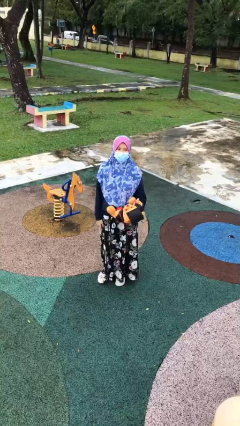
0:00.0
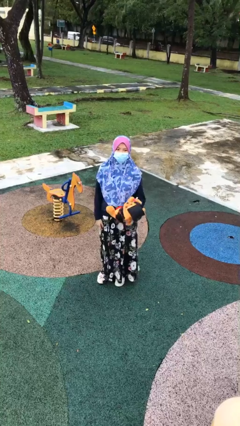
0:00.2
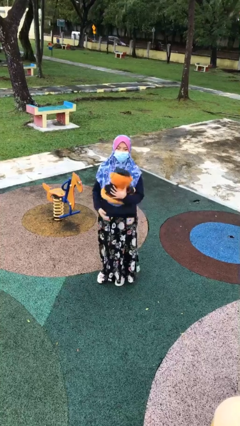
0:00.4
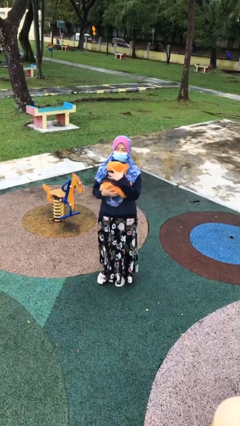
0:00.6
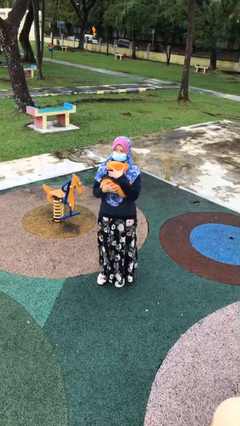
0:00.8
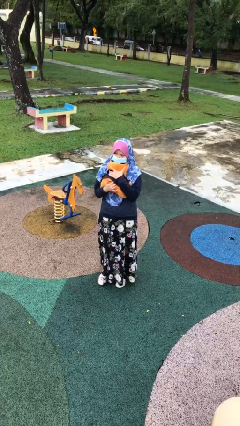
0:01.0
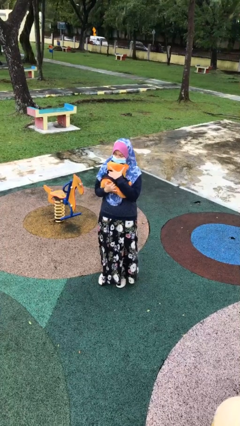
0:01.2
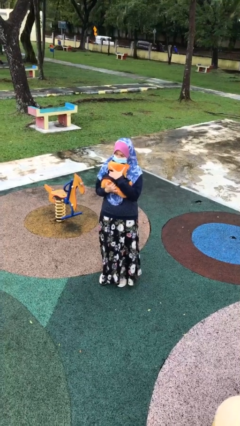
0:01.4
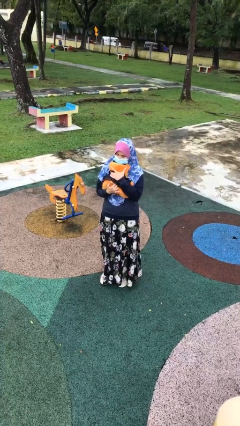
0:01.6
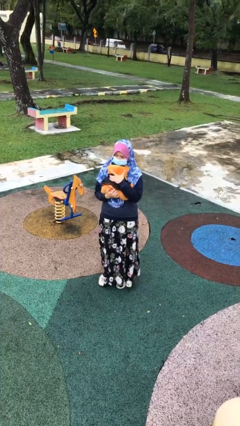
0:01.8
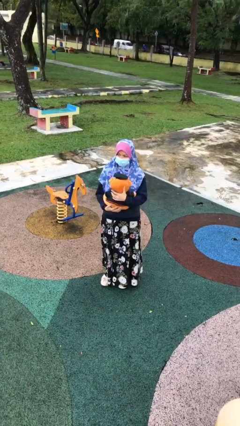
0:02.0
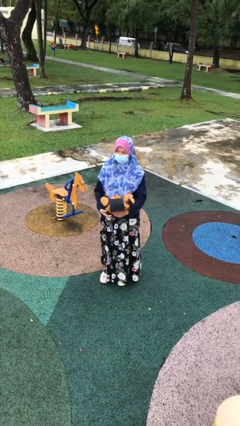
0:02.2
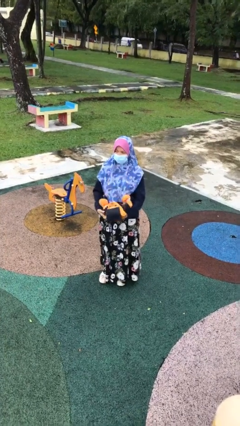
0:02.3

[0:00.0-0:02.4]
person hugs stuffed animal

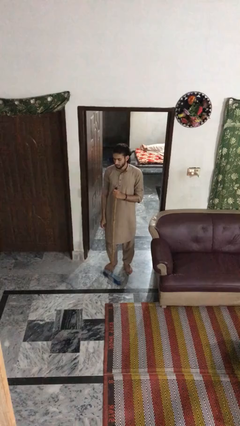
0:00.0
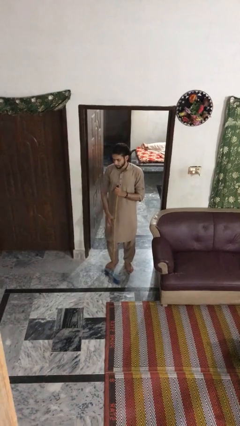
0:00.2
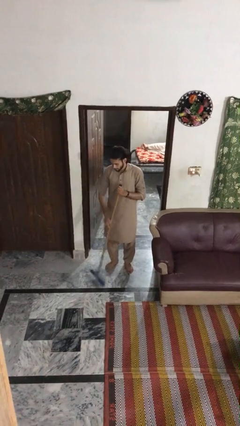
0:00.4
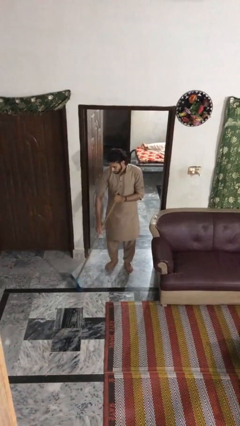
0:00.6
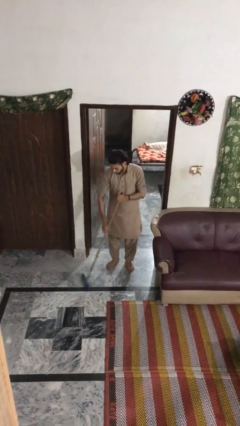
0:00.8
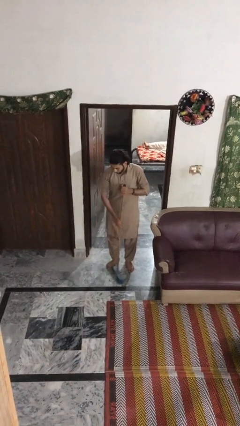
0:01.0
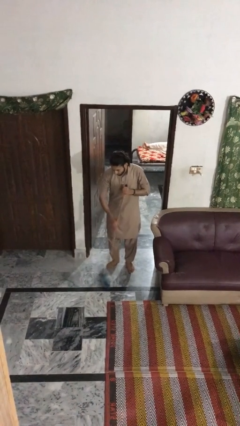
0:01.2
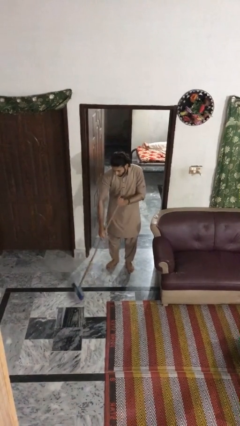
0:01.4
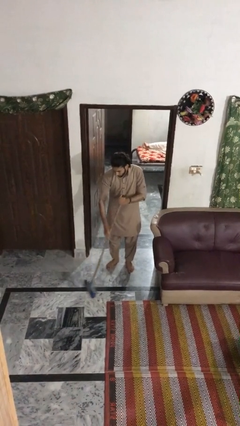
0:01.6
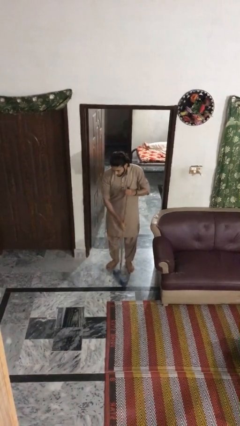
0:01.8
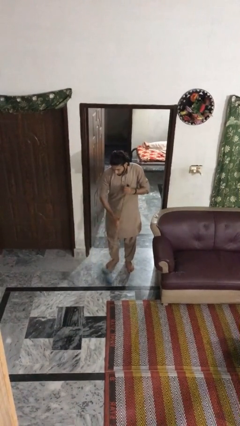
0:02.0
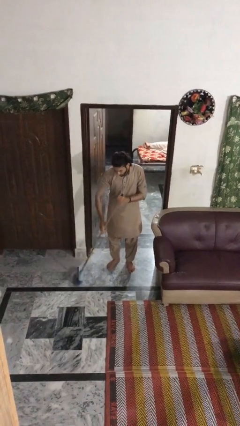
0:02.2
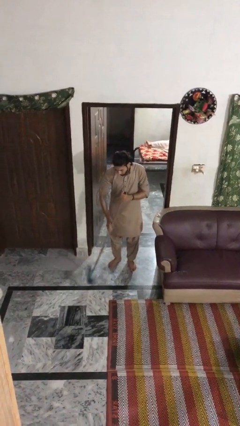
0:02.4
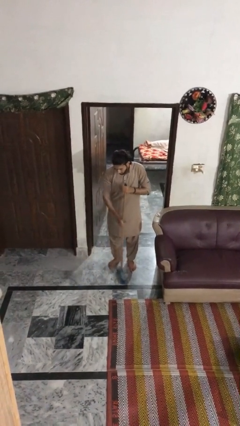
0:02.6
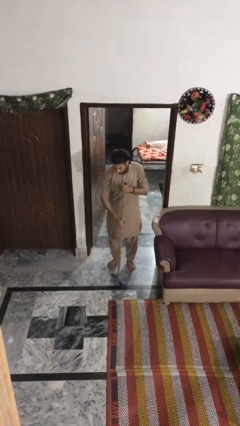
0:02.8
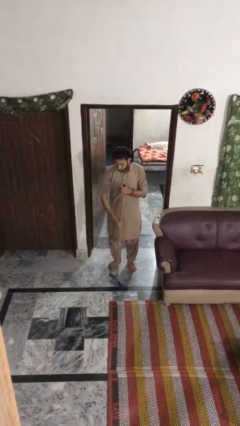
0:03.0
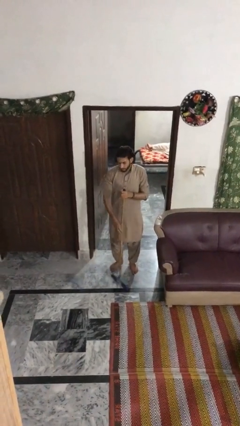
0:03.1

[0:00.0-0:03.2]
person sweeps floor

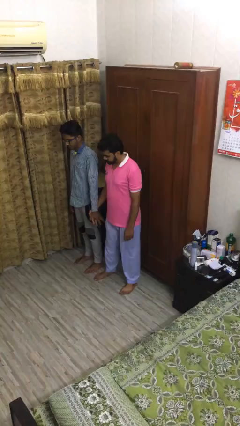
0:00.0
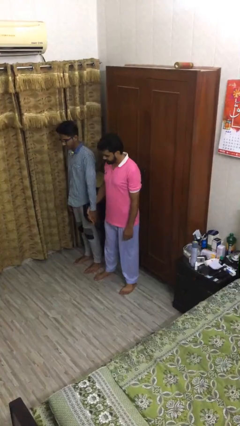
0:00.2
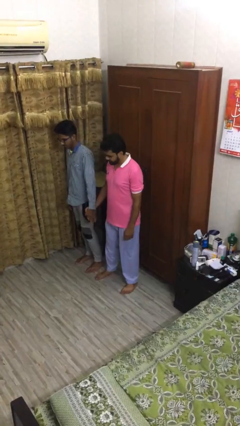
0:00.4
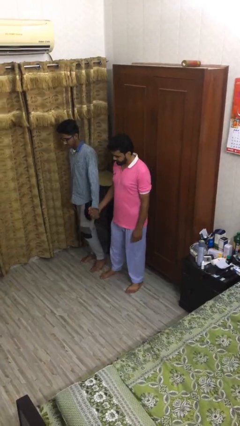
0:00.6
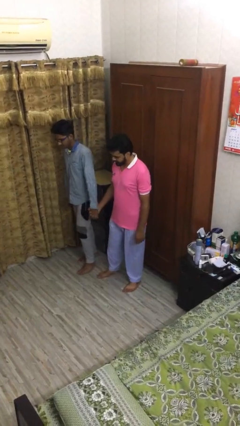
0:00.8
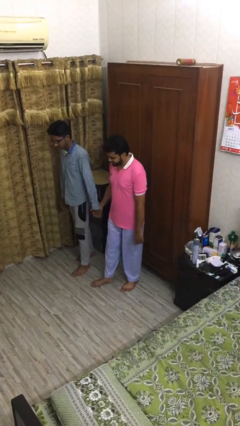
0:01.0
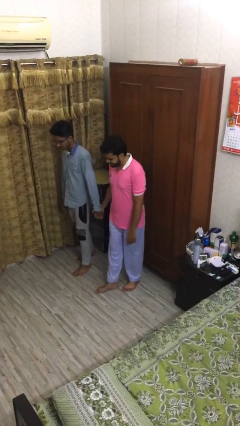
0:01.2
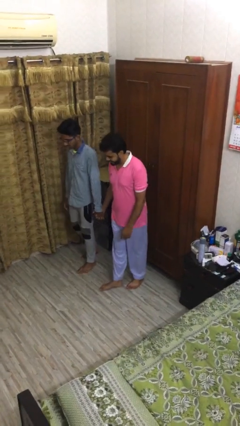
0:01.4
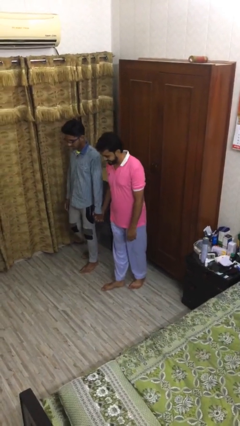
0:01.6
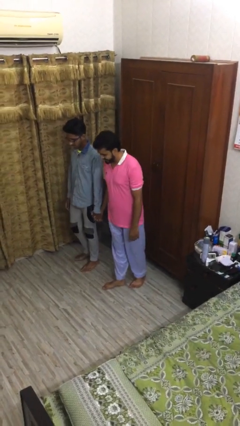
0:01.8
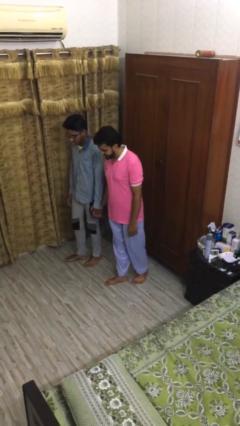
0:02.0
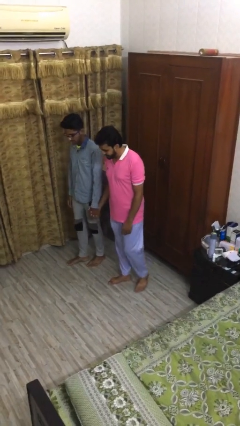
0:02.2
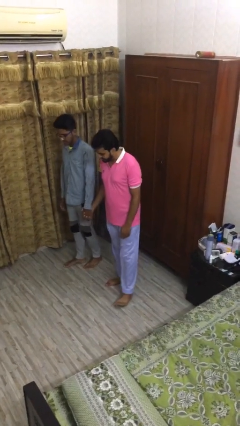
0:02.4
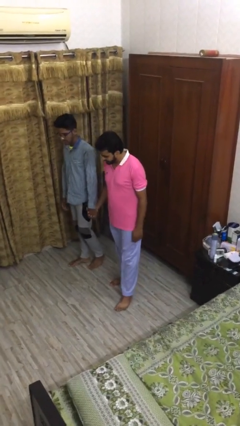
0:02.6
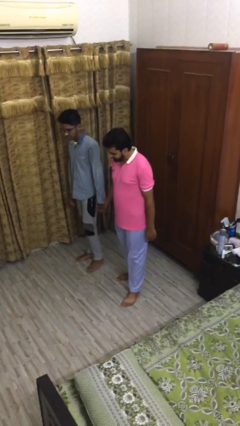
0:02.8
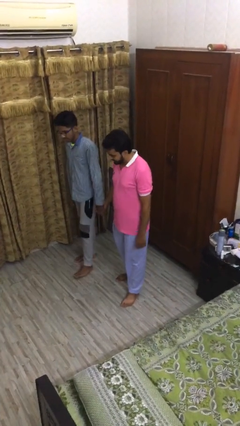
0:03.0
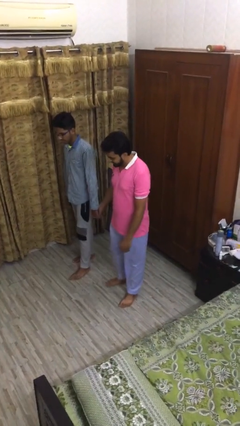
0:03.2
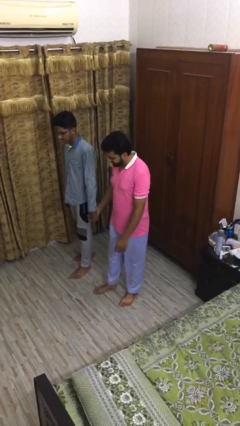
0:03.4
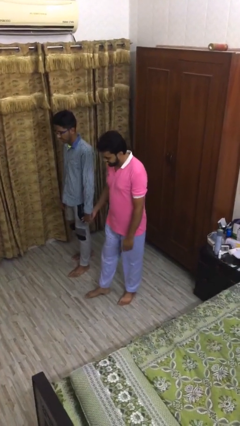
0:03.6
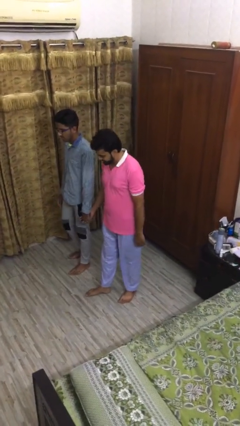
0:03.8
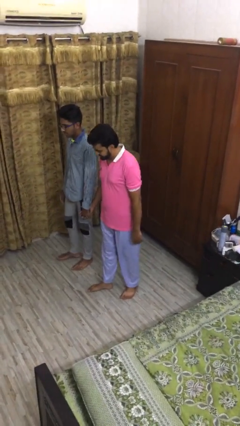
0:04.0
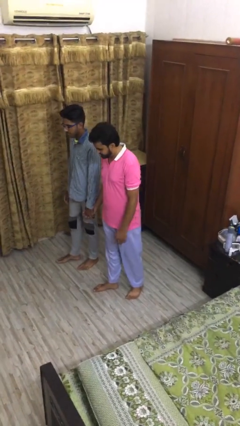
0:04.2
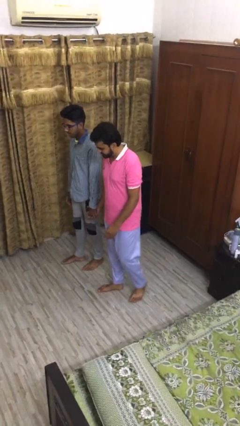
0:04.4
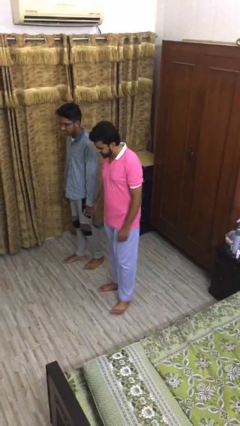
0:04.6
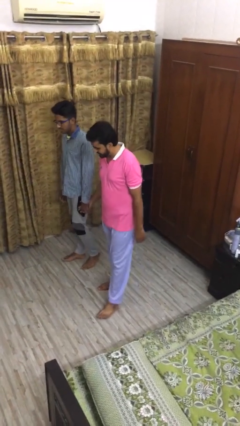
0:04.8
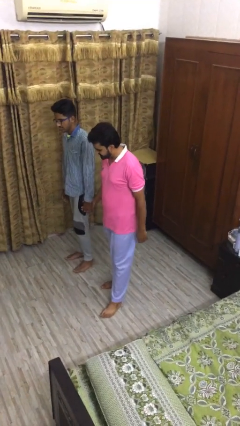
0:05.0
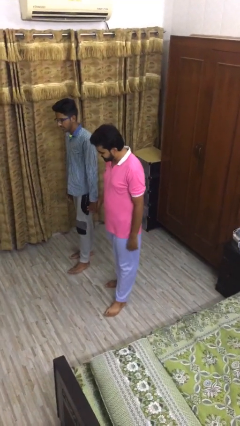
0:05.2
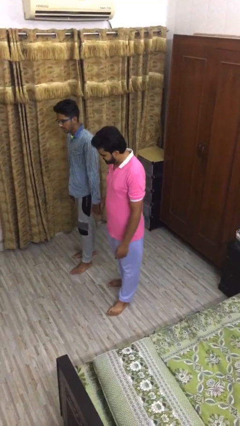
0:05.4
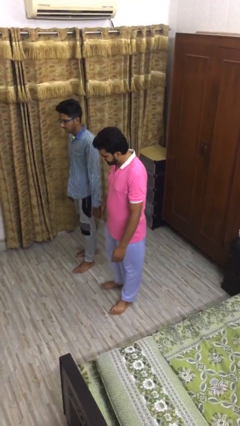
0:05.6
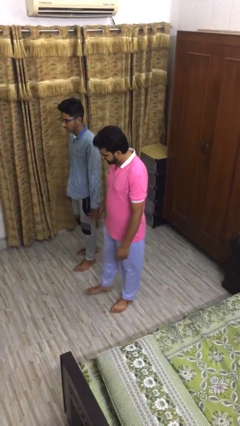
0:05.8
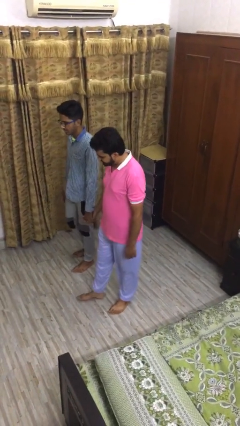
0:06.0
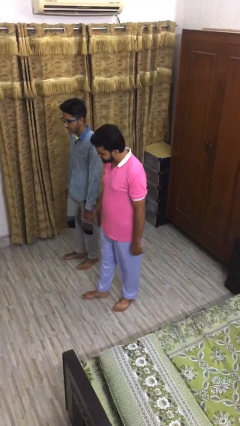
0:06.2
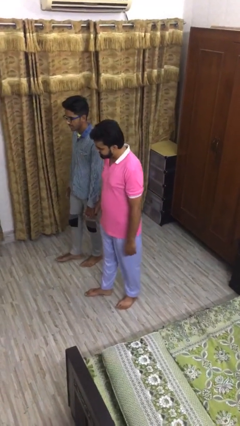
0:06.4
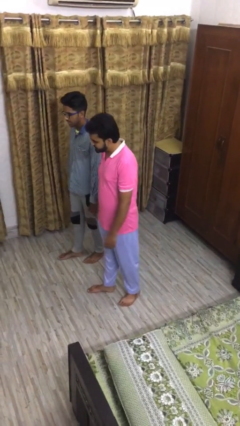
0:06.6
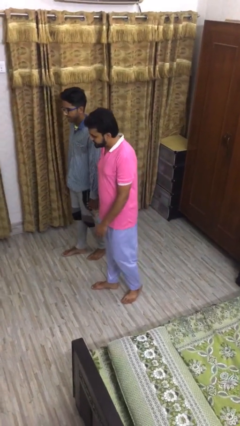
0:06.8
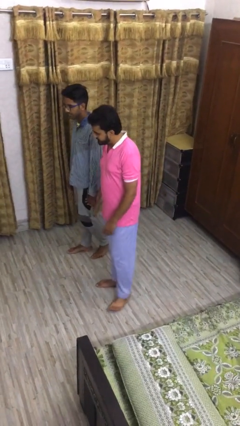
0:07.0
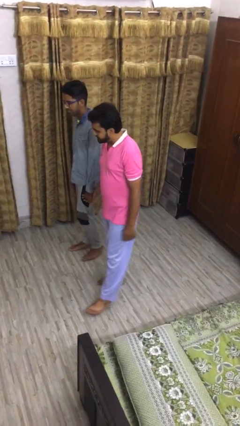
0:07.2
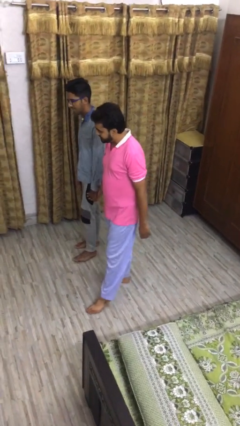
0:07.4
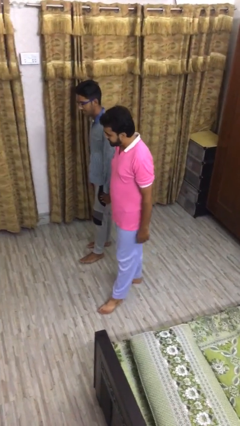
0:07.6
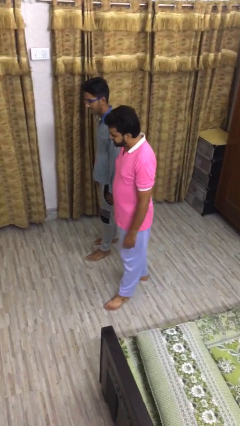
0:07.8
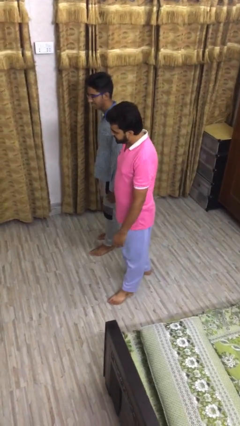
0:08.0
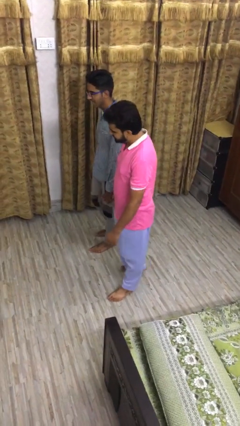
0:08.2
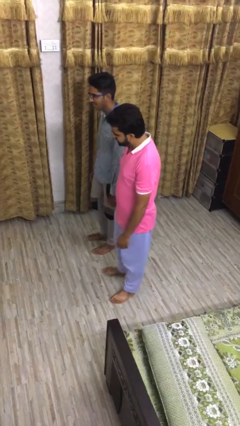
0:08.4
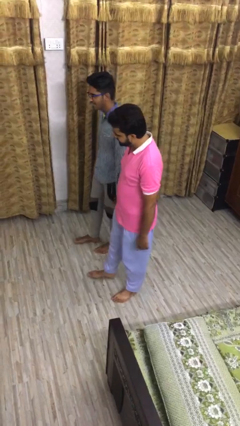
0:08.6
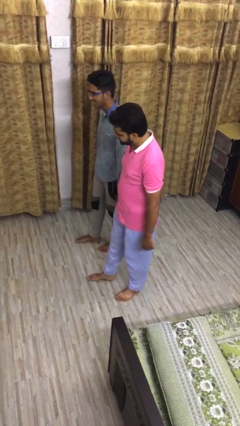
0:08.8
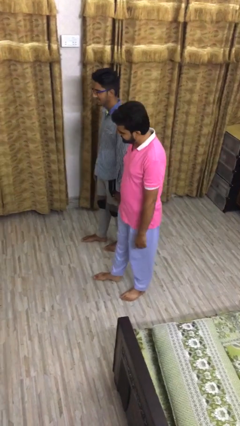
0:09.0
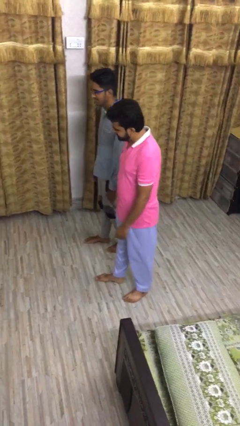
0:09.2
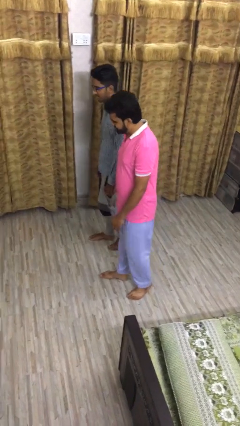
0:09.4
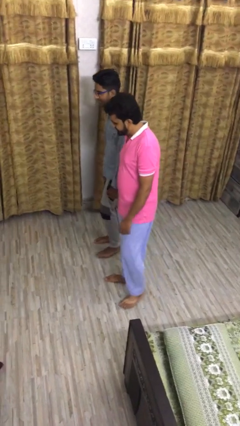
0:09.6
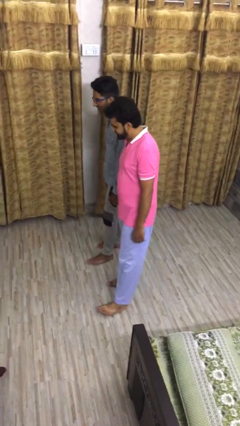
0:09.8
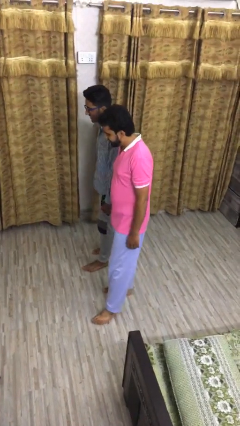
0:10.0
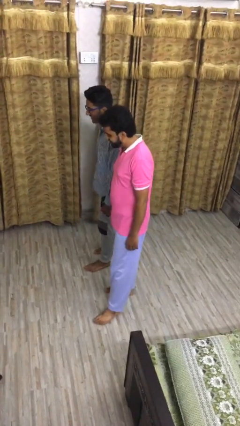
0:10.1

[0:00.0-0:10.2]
person holds hand

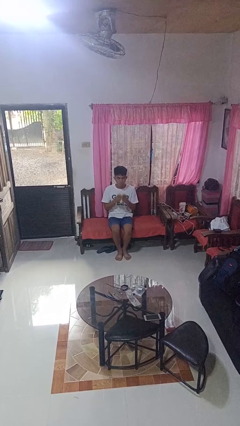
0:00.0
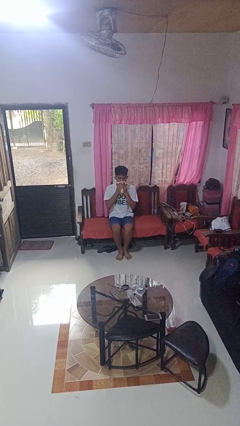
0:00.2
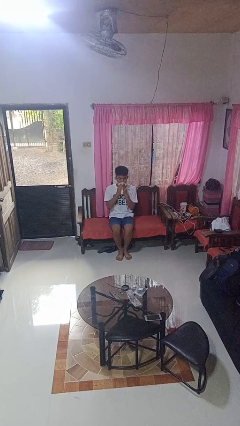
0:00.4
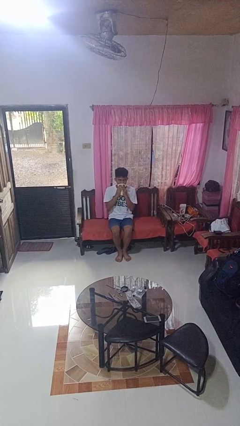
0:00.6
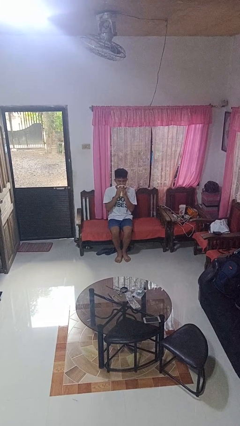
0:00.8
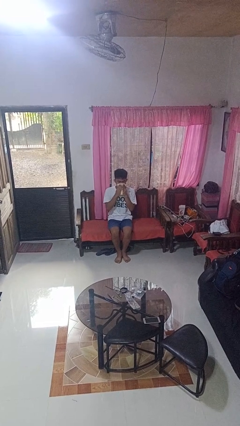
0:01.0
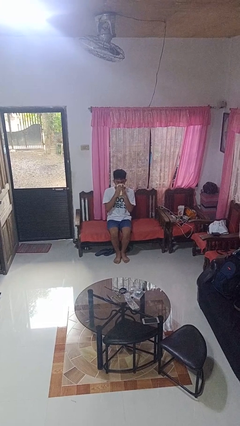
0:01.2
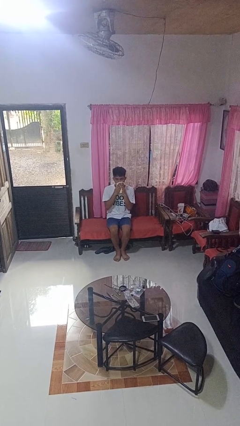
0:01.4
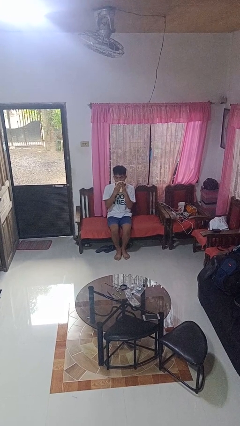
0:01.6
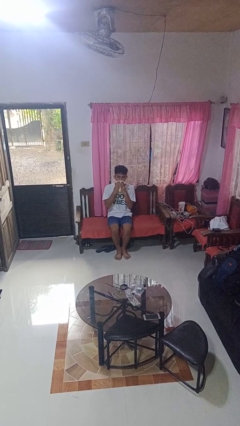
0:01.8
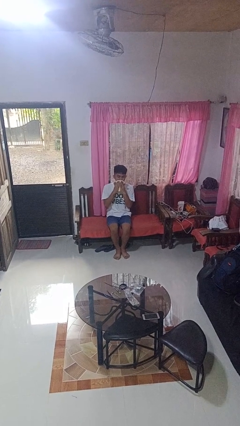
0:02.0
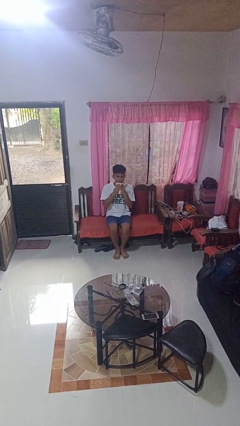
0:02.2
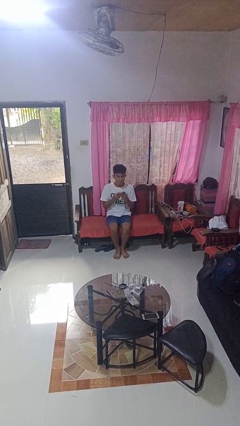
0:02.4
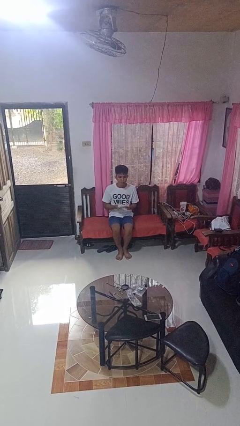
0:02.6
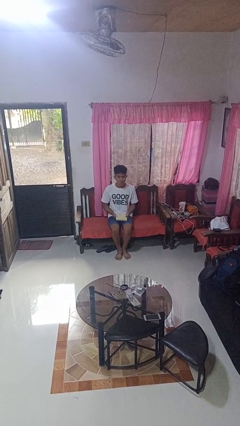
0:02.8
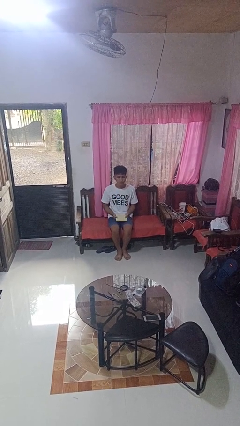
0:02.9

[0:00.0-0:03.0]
person wipes mouth with napkin
